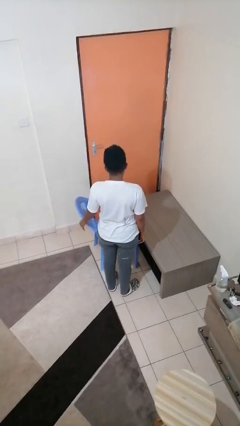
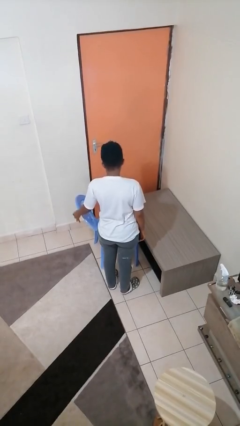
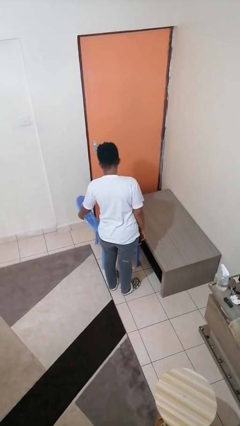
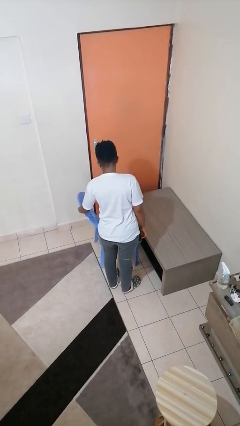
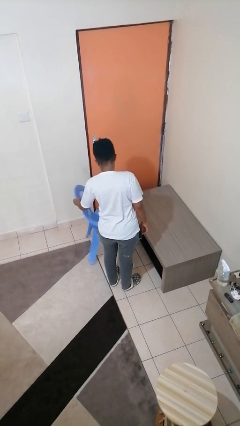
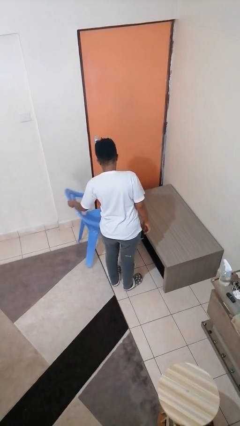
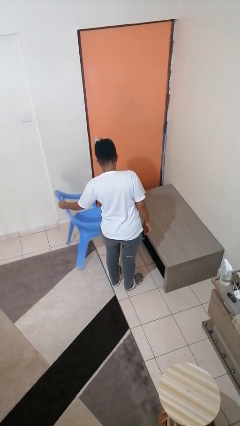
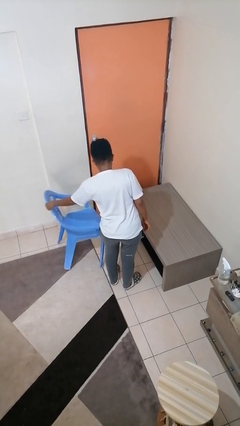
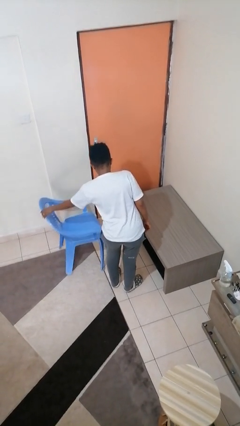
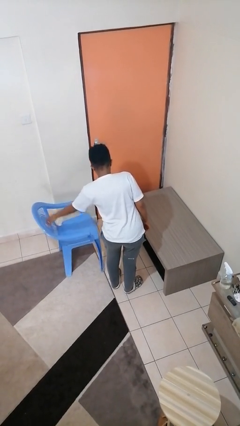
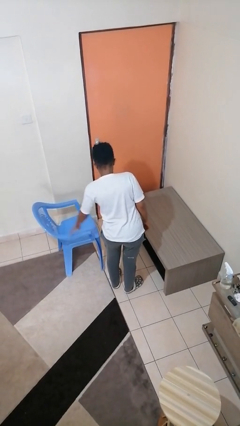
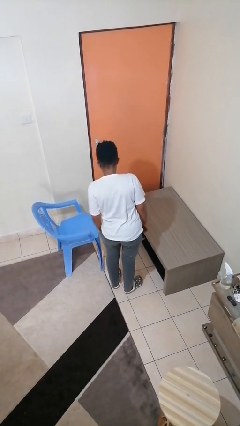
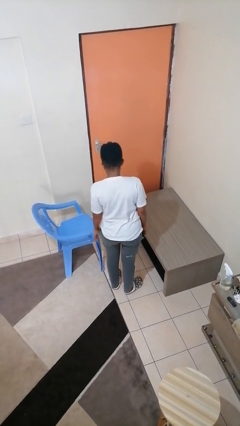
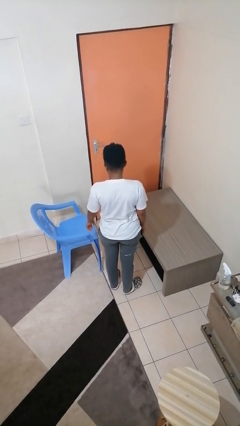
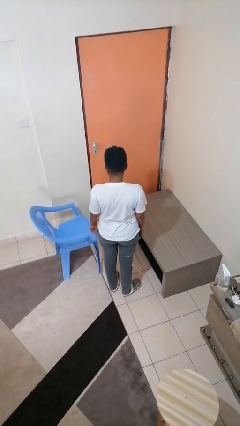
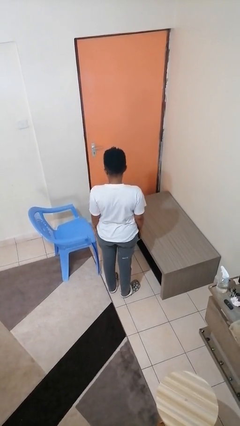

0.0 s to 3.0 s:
person pulls out chair

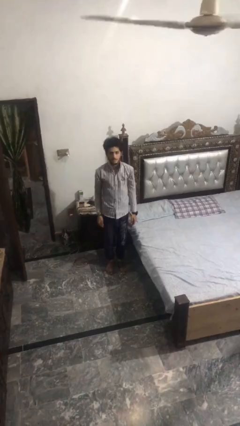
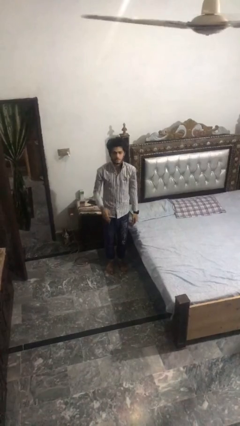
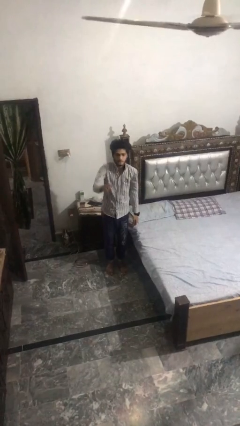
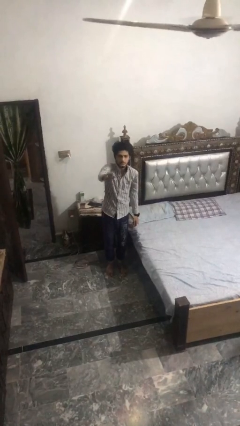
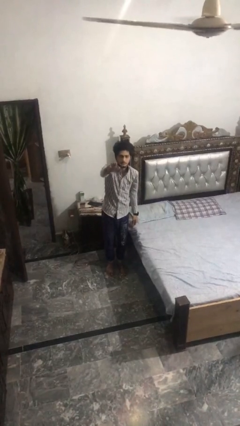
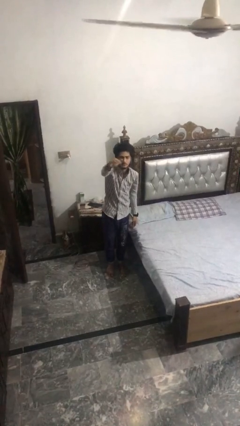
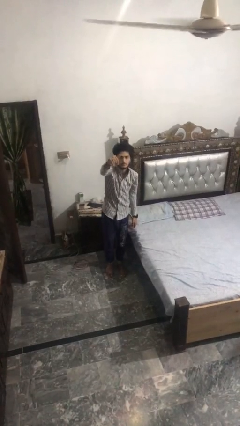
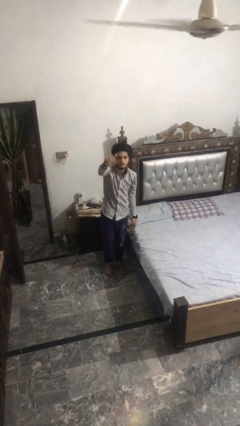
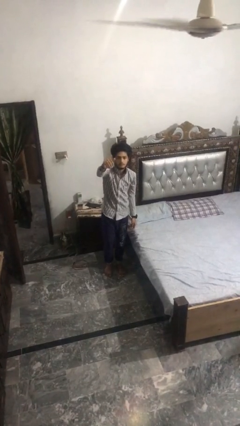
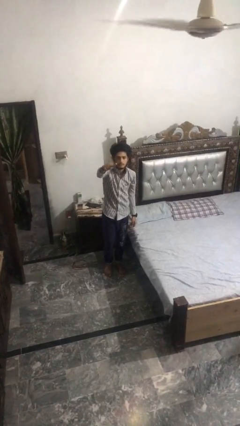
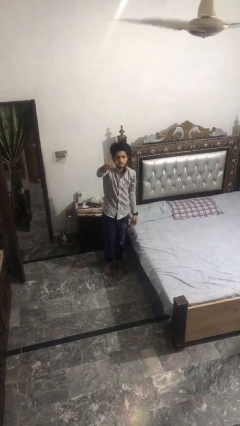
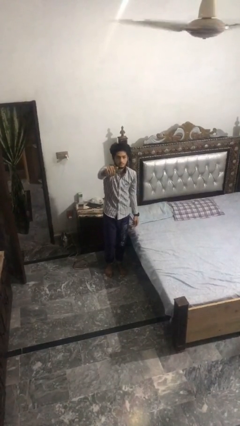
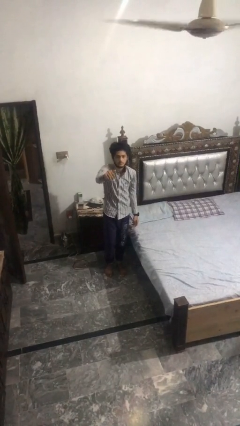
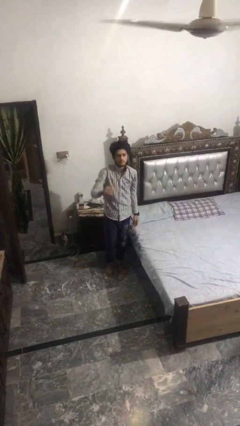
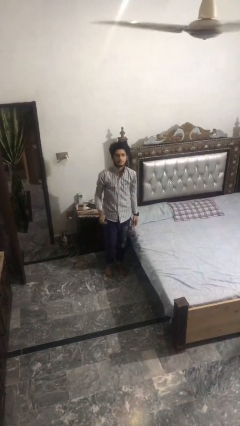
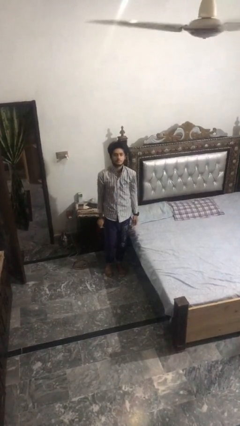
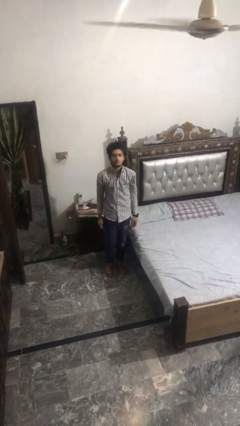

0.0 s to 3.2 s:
person gestures come here

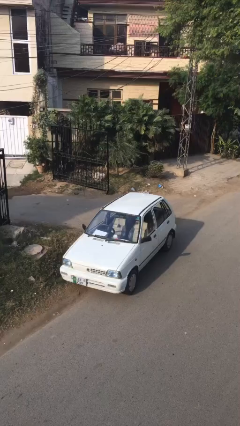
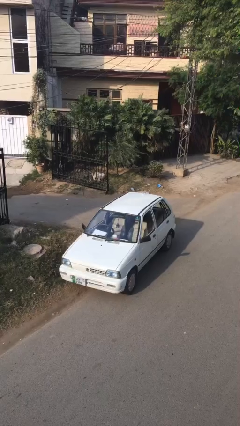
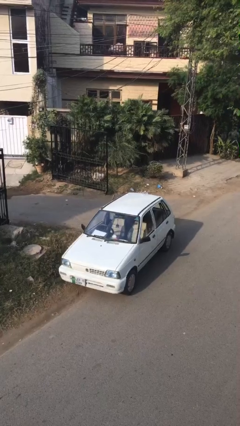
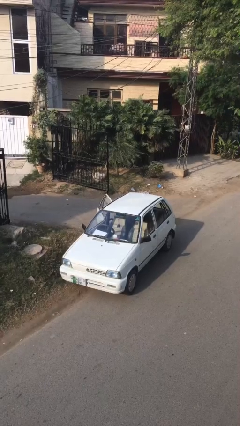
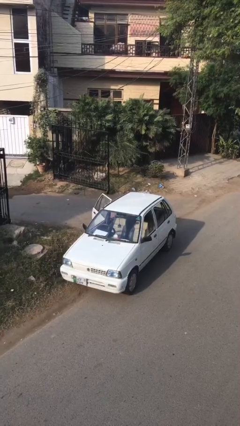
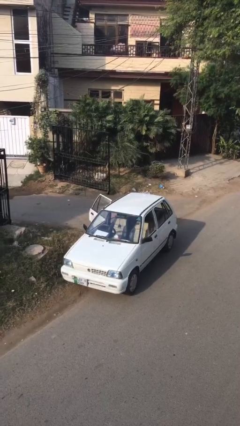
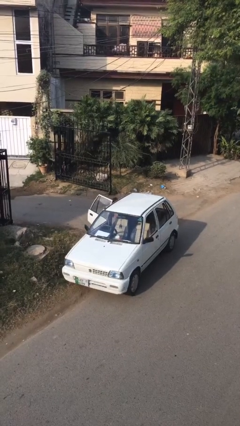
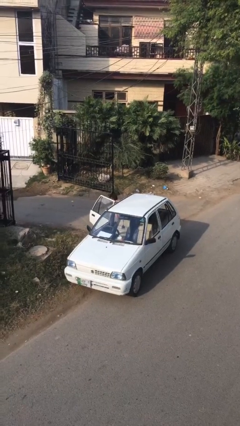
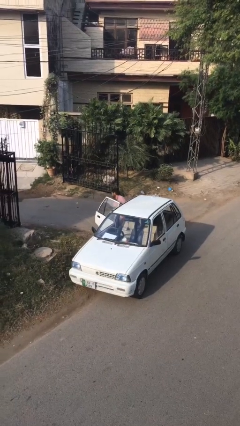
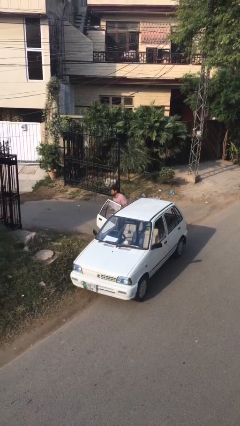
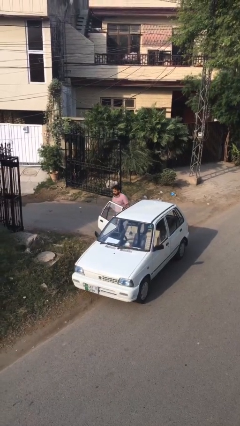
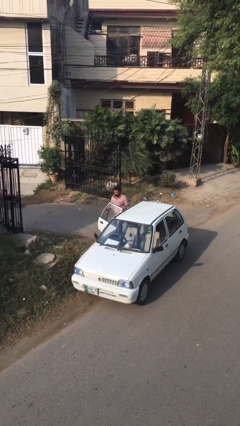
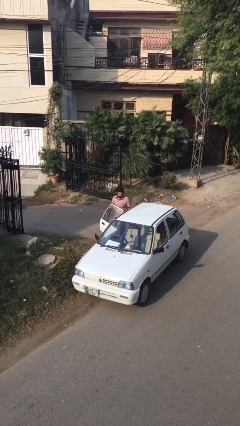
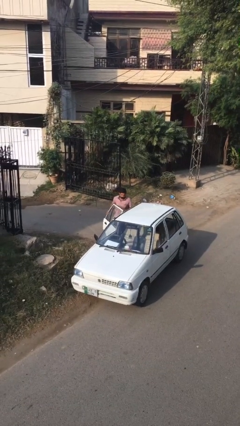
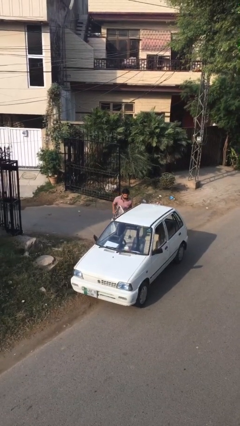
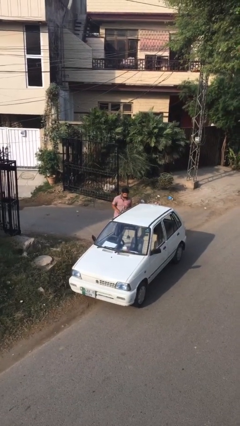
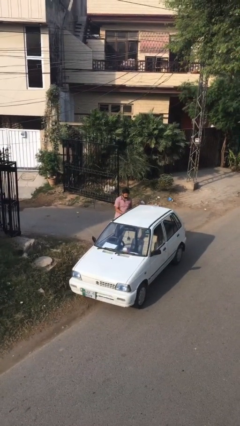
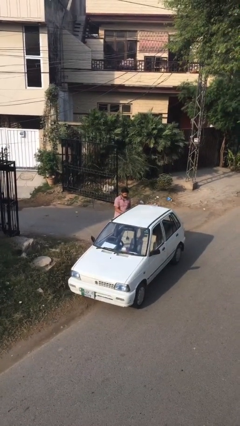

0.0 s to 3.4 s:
person exits car

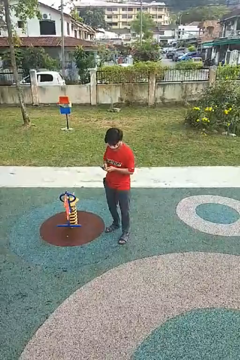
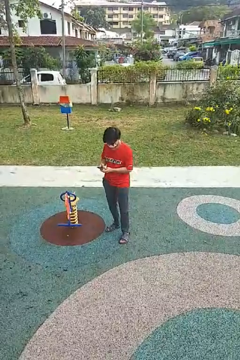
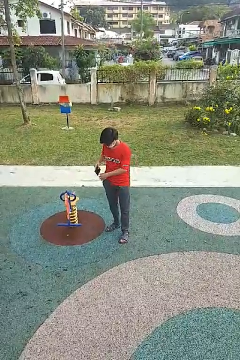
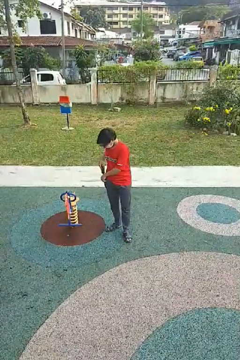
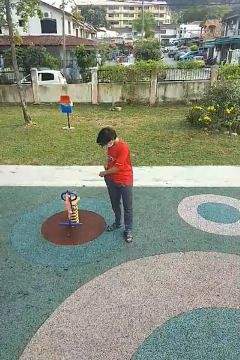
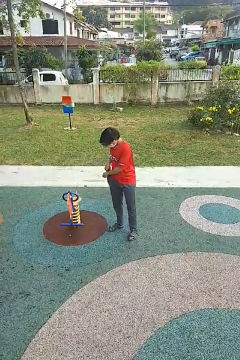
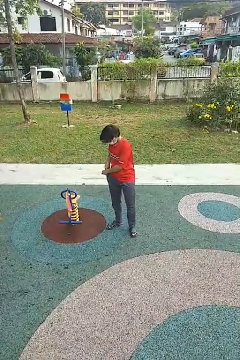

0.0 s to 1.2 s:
person puts phone into pocket

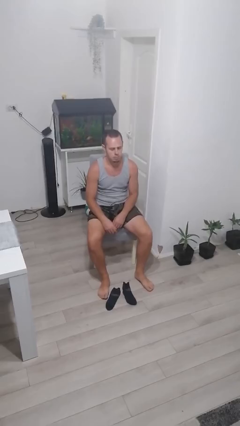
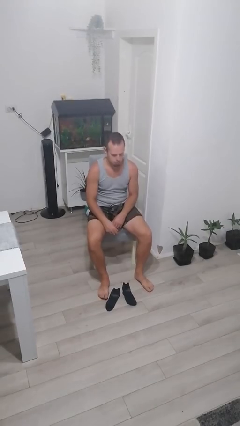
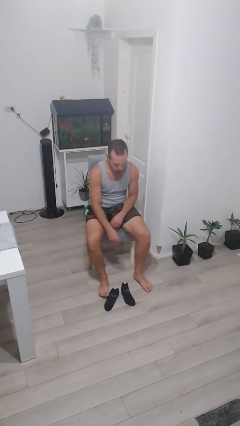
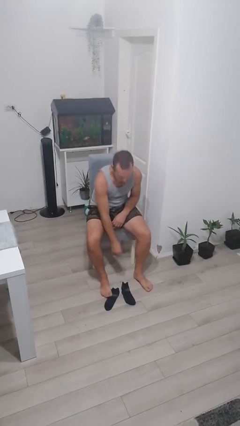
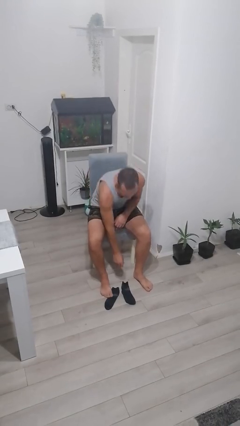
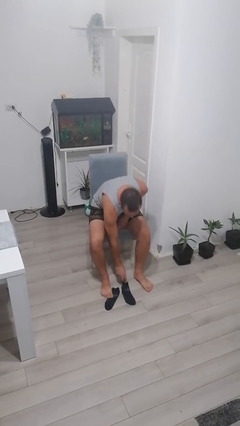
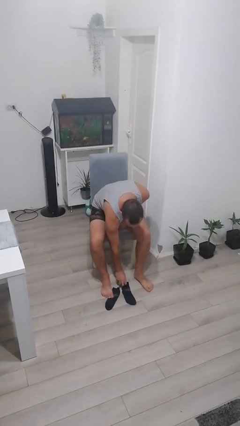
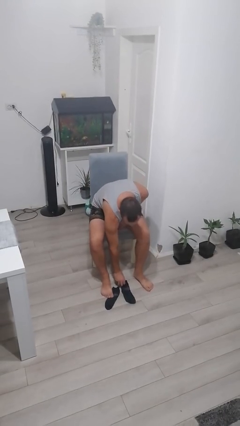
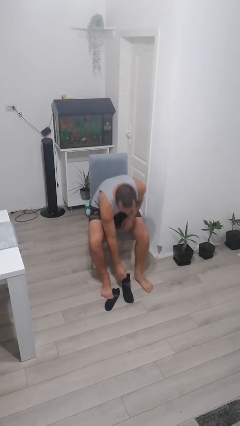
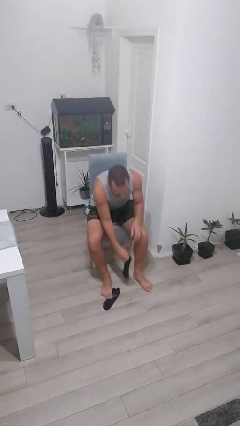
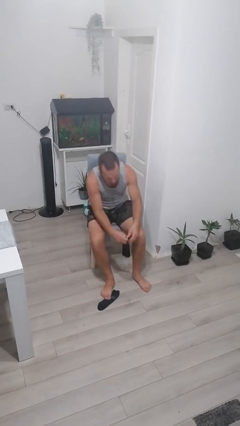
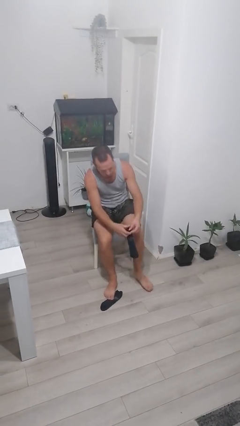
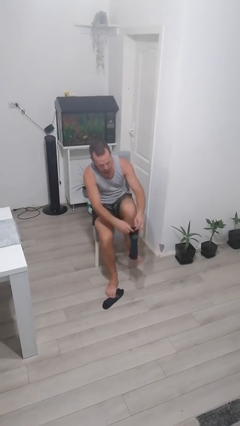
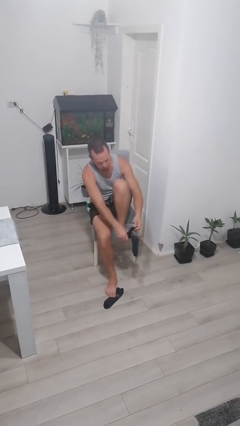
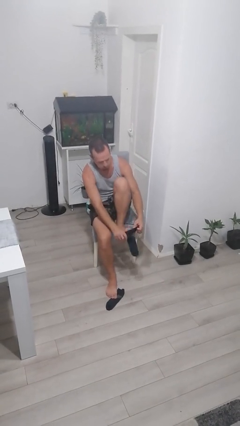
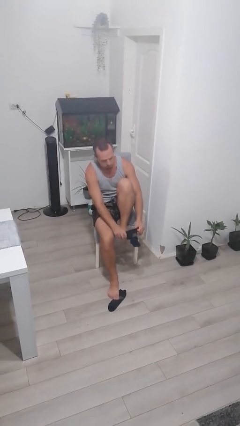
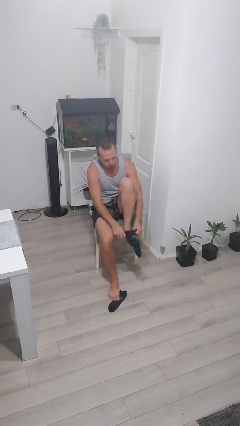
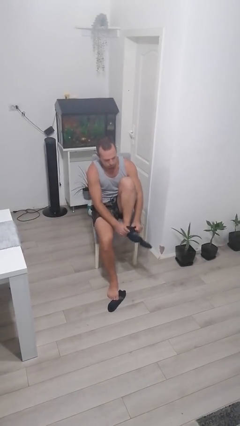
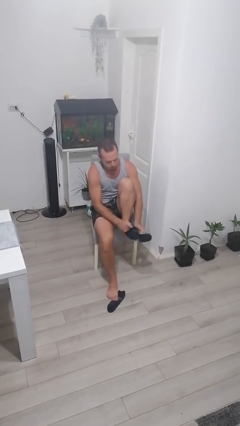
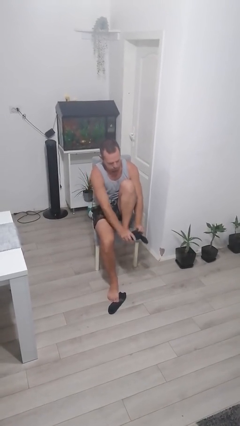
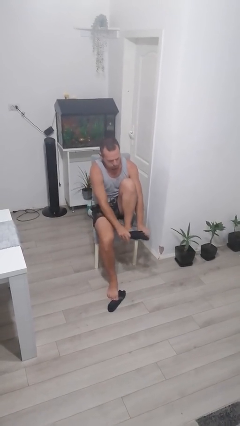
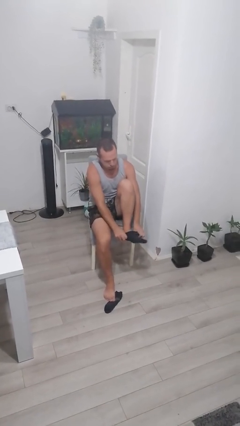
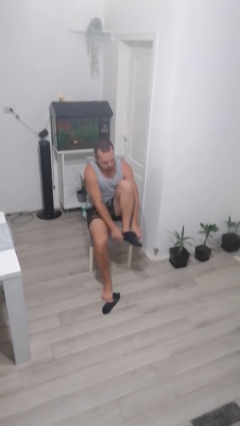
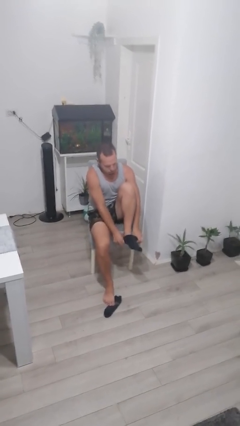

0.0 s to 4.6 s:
person puts on socks

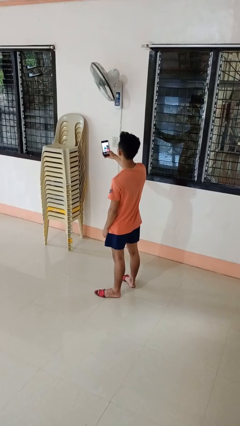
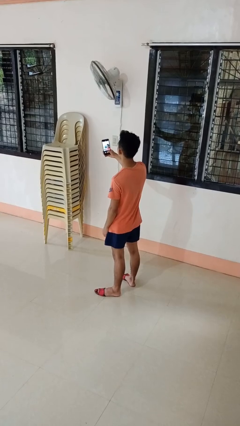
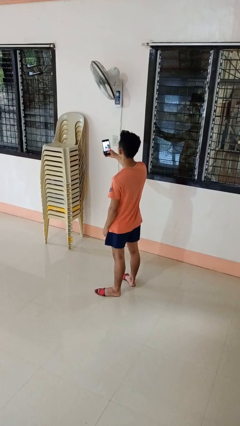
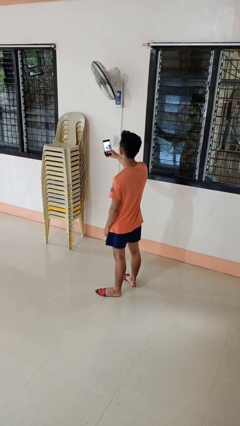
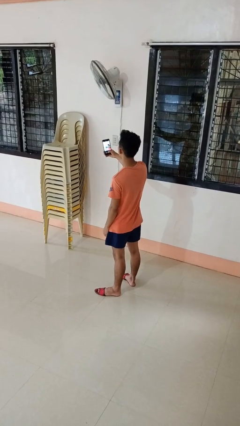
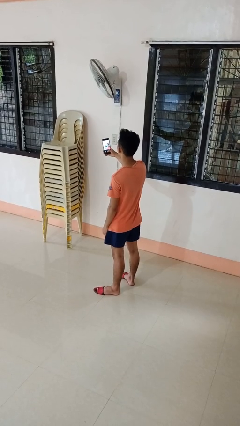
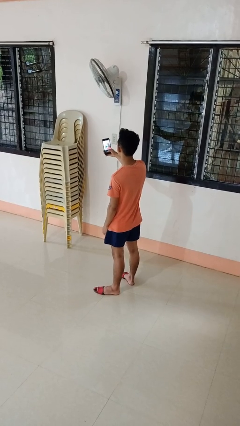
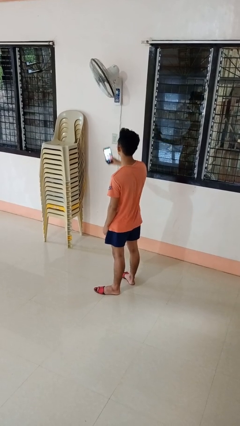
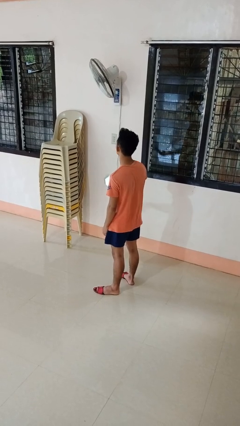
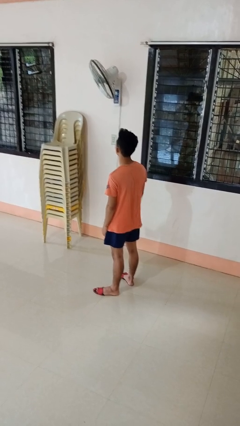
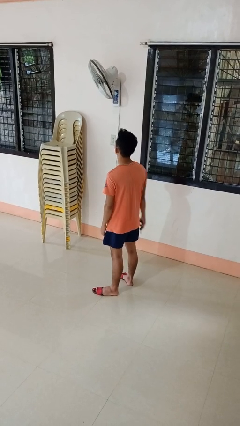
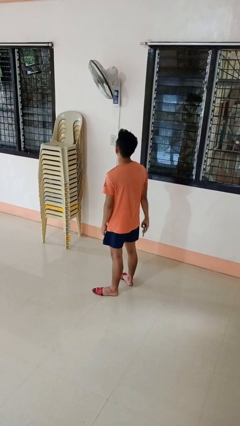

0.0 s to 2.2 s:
person takes selfie
